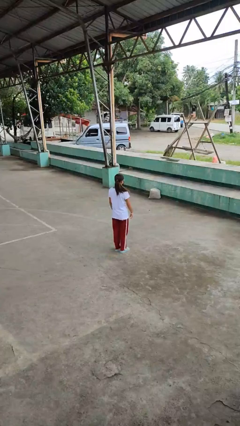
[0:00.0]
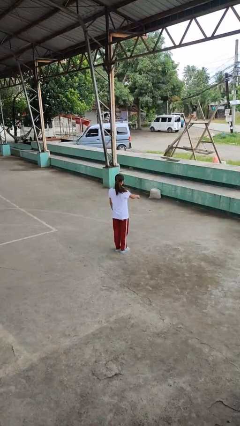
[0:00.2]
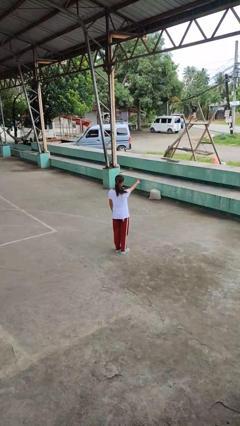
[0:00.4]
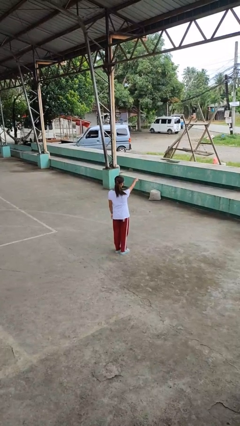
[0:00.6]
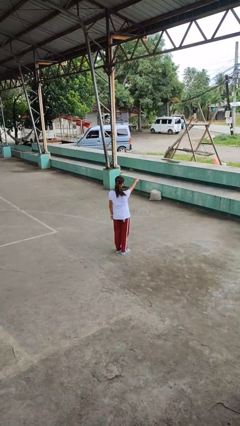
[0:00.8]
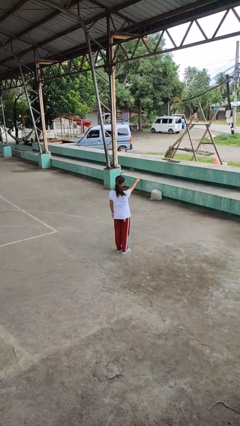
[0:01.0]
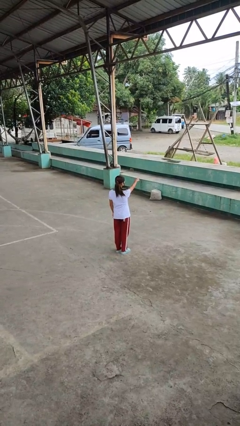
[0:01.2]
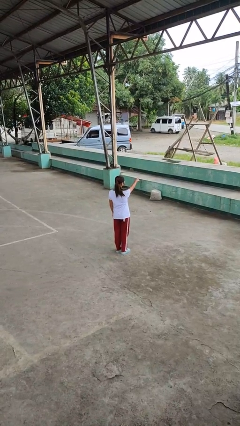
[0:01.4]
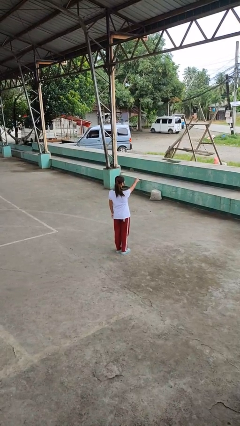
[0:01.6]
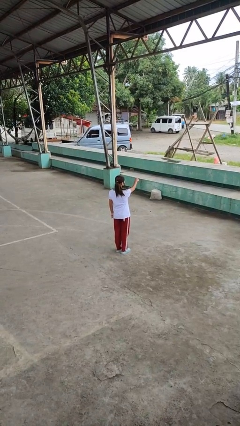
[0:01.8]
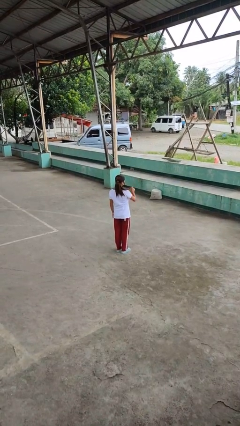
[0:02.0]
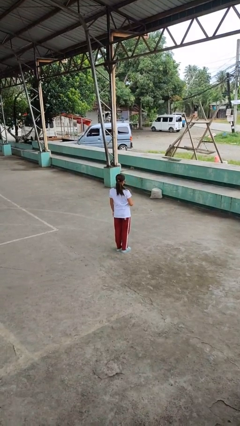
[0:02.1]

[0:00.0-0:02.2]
person points at person

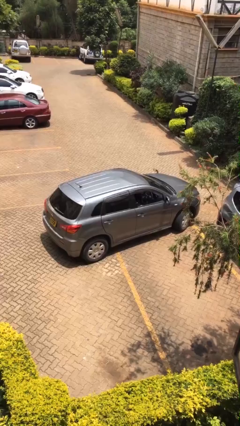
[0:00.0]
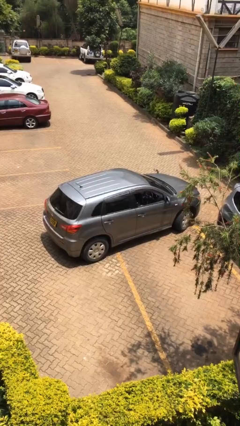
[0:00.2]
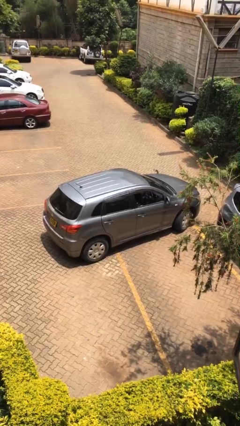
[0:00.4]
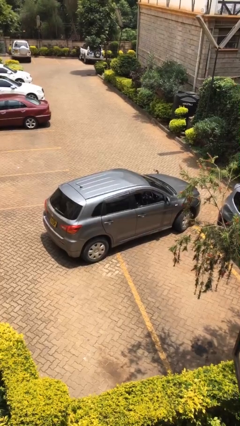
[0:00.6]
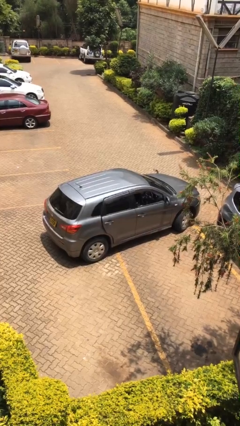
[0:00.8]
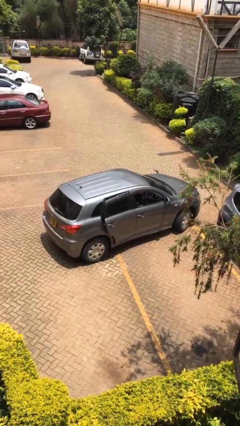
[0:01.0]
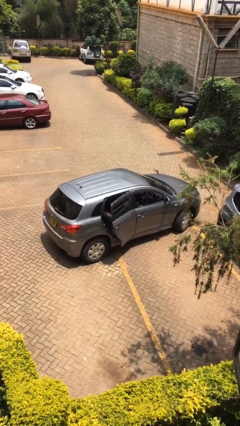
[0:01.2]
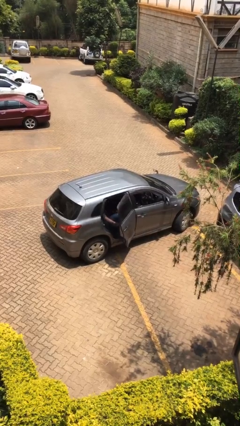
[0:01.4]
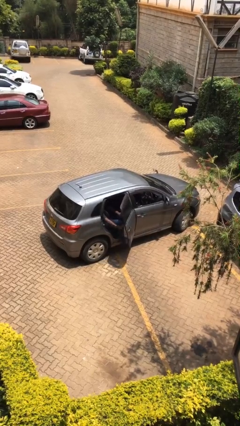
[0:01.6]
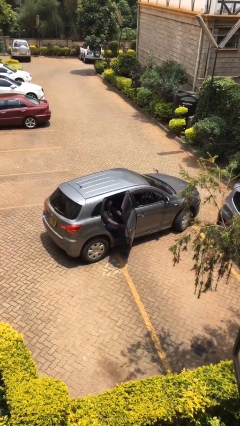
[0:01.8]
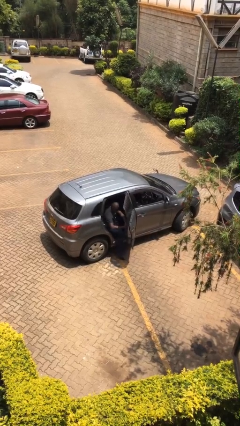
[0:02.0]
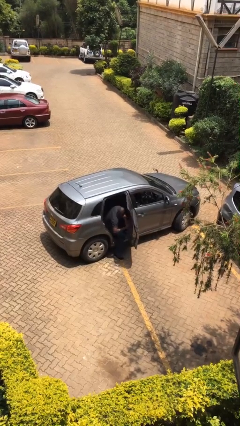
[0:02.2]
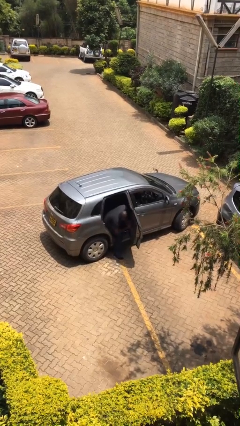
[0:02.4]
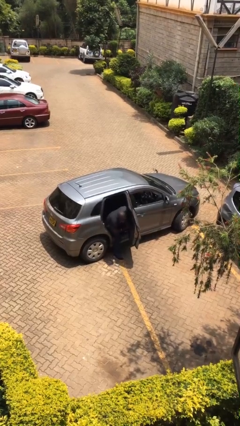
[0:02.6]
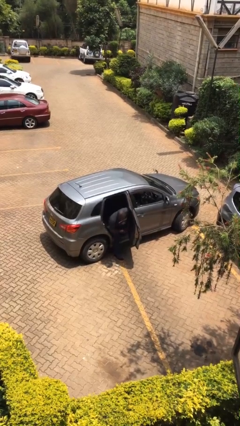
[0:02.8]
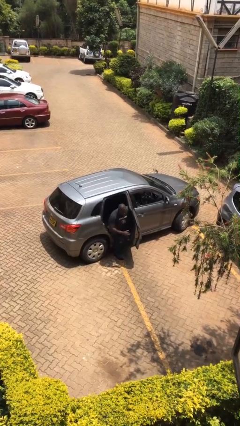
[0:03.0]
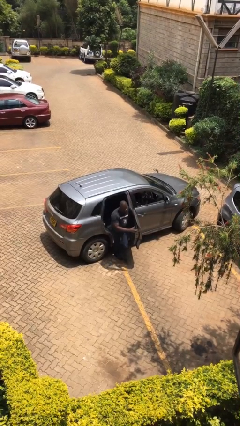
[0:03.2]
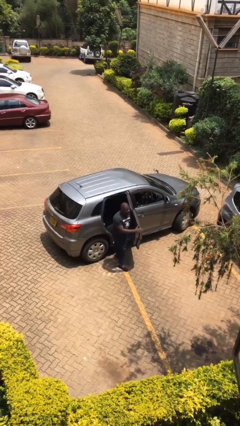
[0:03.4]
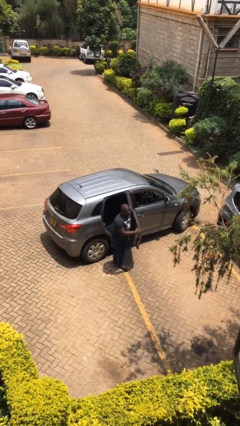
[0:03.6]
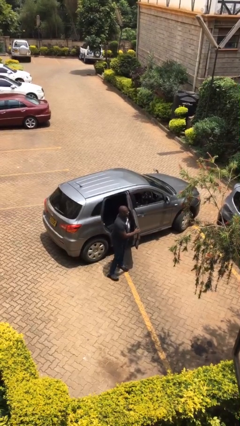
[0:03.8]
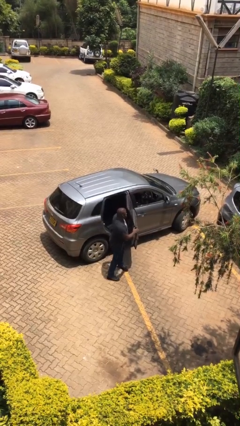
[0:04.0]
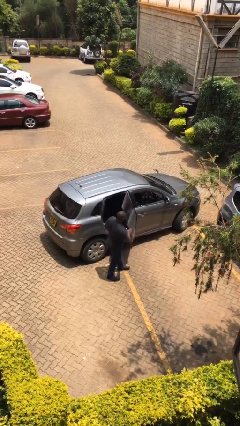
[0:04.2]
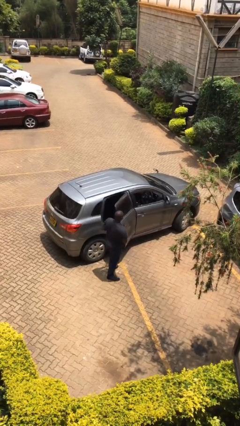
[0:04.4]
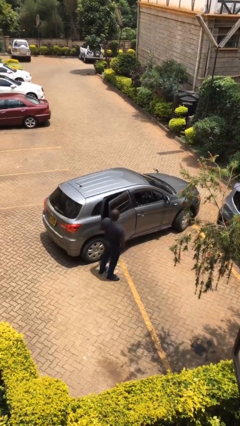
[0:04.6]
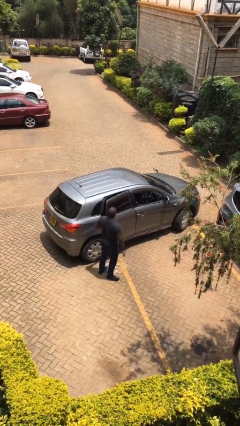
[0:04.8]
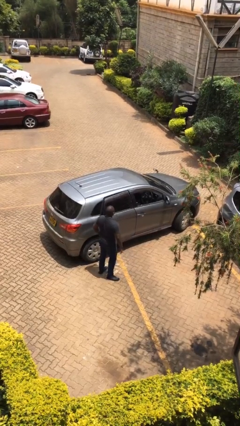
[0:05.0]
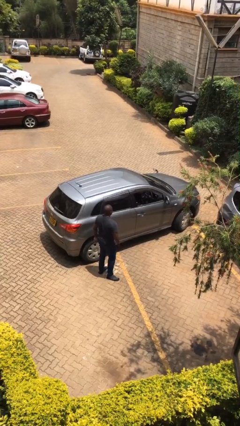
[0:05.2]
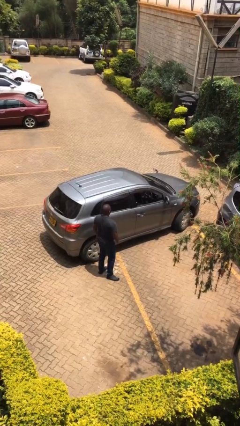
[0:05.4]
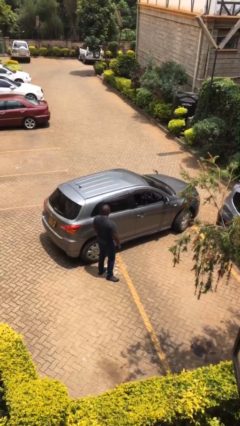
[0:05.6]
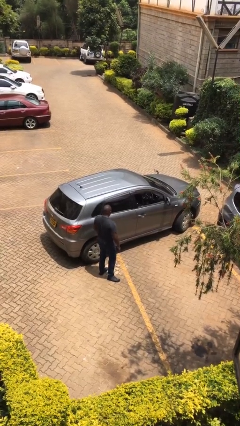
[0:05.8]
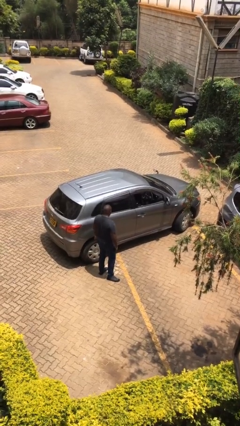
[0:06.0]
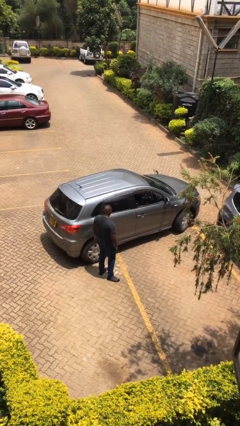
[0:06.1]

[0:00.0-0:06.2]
car drops off person

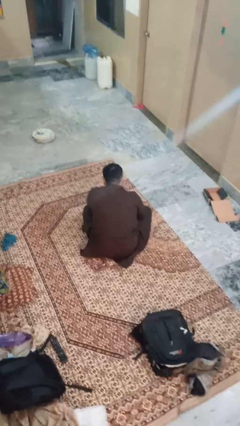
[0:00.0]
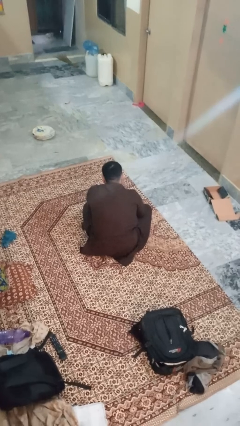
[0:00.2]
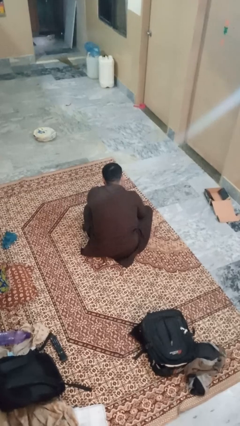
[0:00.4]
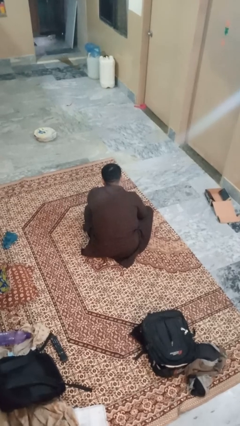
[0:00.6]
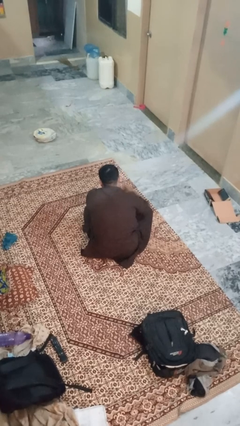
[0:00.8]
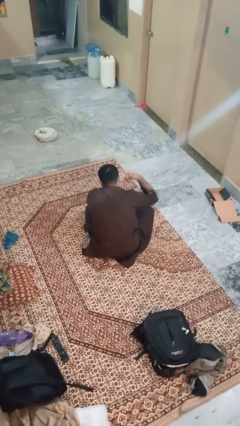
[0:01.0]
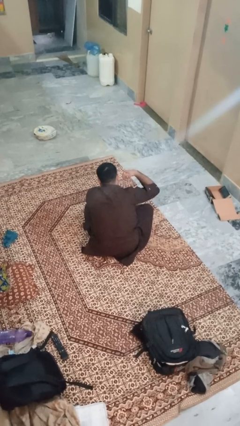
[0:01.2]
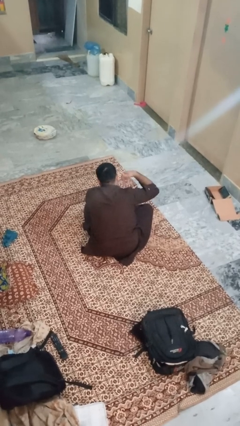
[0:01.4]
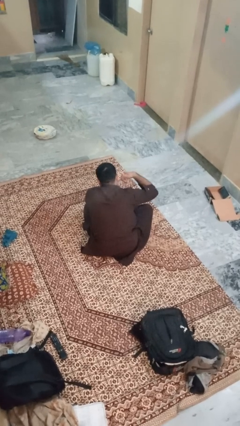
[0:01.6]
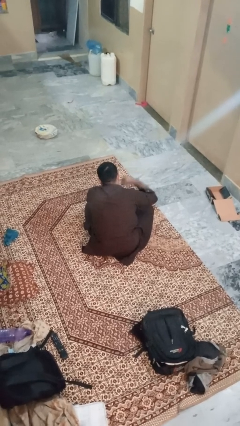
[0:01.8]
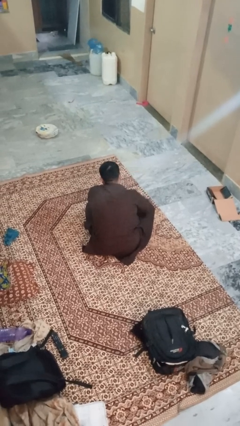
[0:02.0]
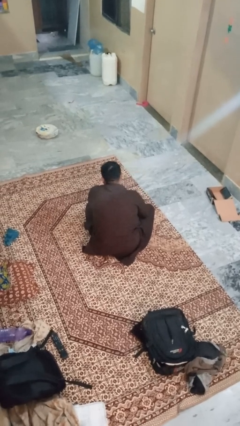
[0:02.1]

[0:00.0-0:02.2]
person gestures call me

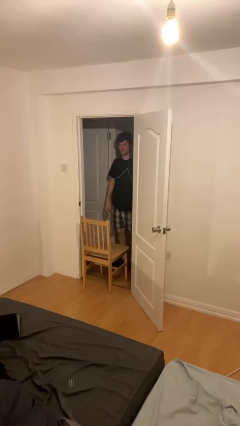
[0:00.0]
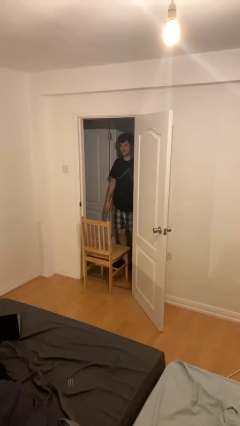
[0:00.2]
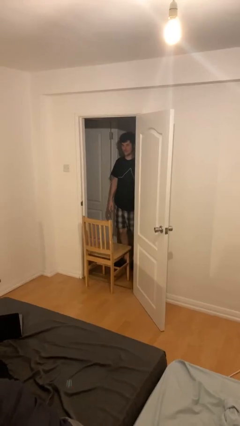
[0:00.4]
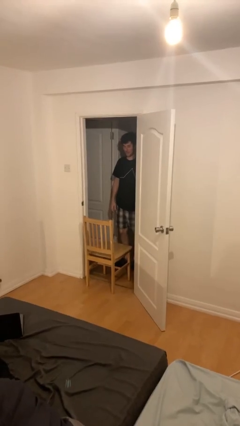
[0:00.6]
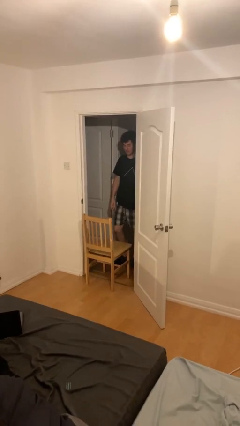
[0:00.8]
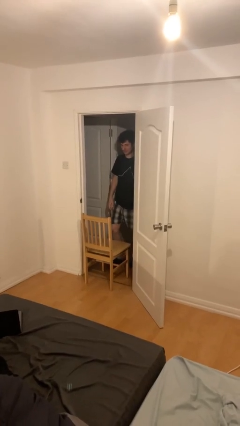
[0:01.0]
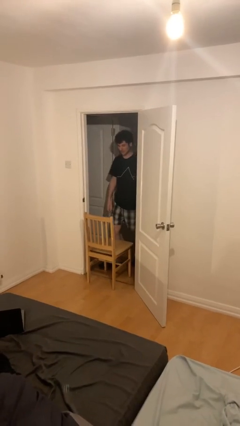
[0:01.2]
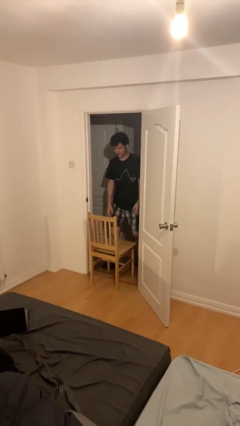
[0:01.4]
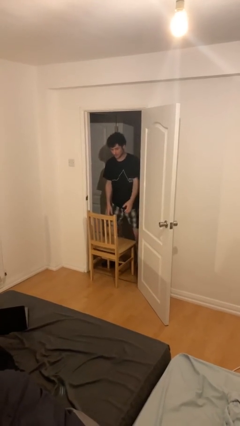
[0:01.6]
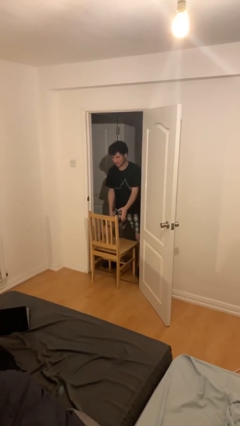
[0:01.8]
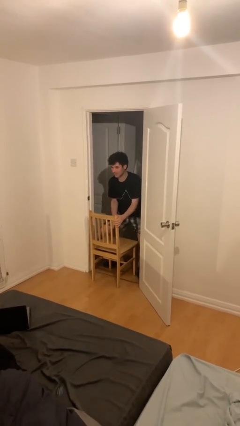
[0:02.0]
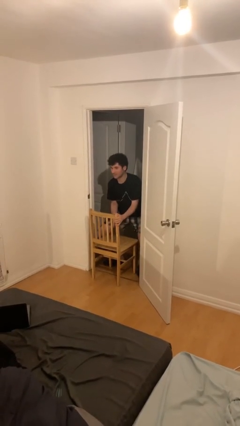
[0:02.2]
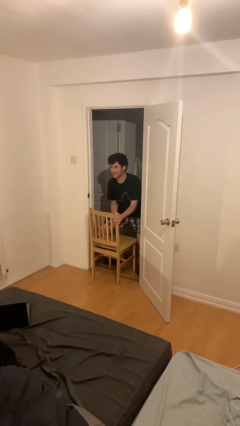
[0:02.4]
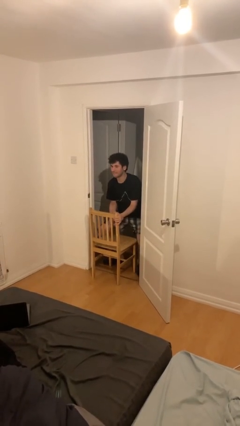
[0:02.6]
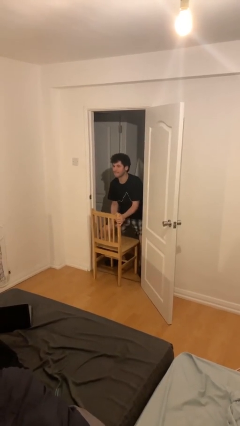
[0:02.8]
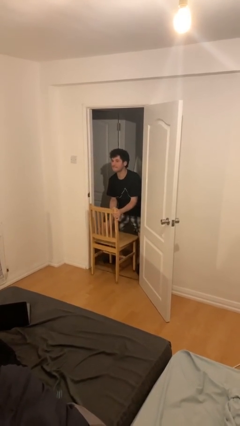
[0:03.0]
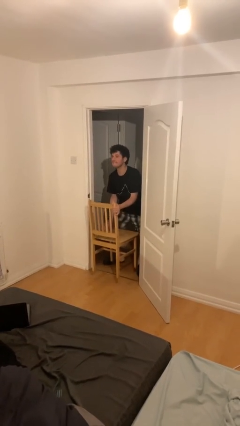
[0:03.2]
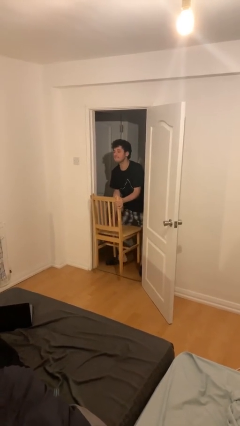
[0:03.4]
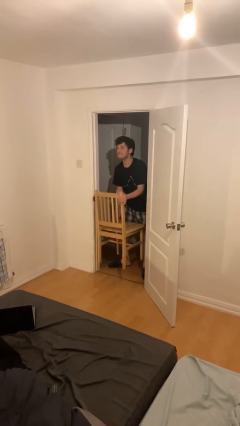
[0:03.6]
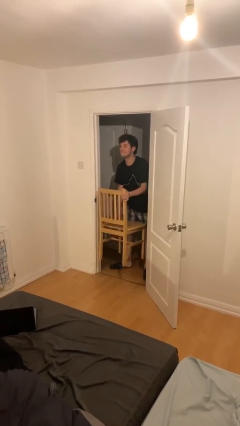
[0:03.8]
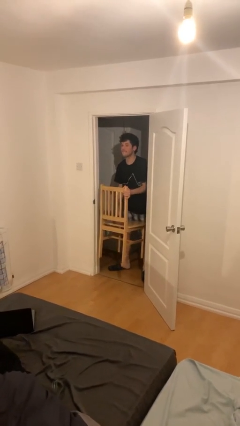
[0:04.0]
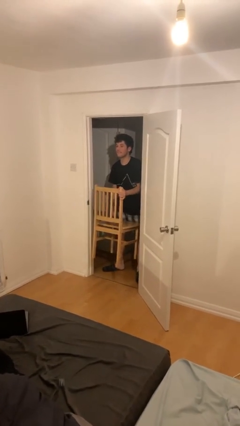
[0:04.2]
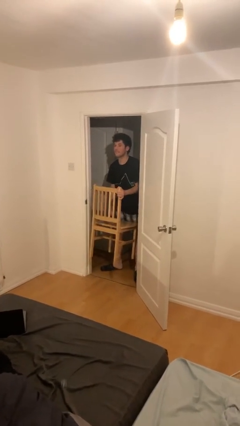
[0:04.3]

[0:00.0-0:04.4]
person picks up object from floor

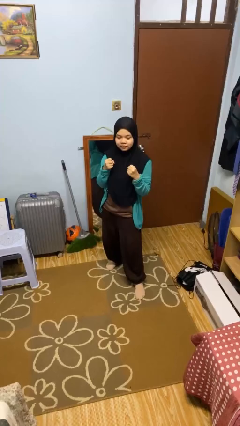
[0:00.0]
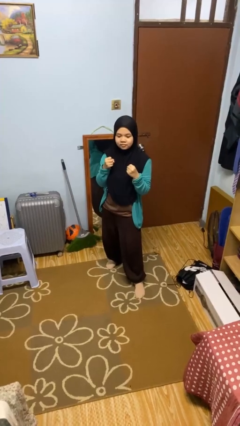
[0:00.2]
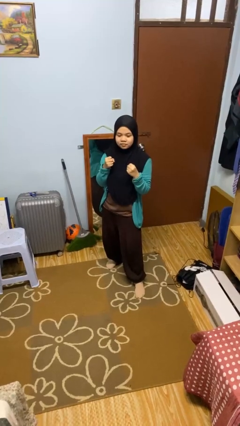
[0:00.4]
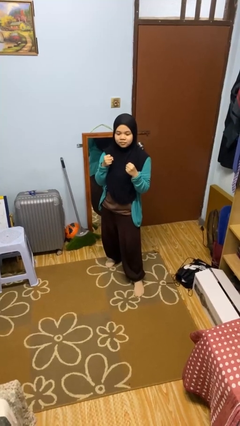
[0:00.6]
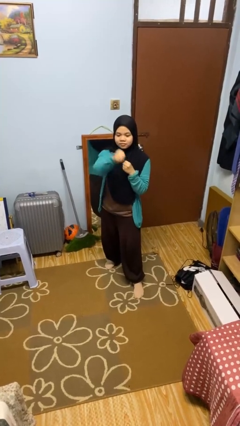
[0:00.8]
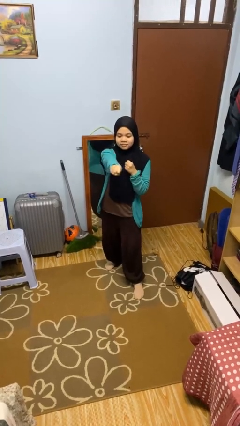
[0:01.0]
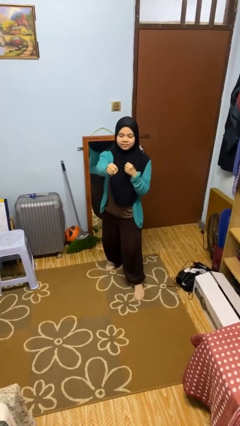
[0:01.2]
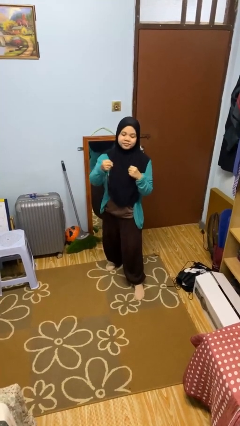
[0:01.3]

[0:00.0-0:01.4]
person punches

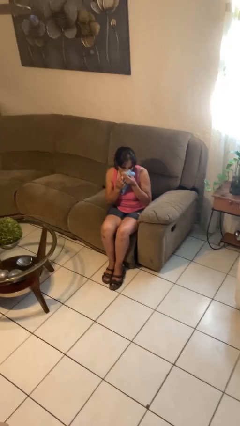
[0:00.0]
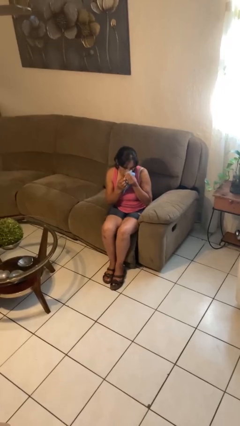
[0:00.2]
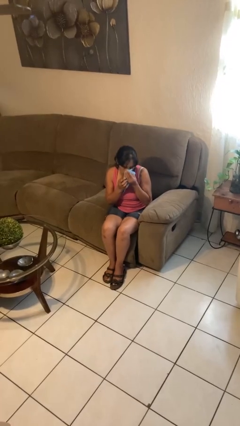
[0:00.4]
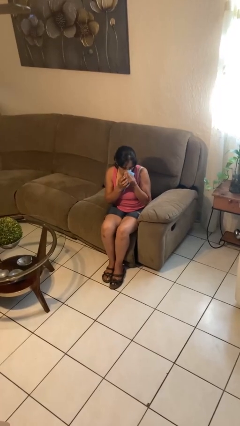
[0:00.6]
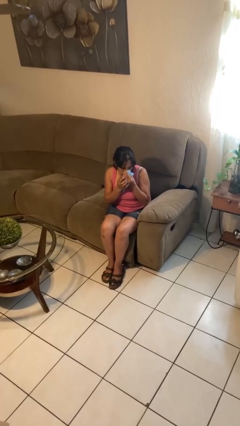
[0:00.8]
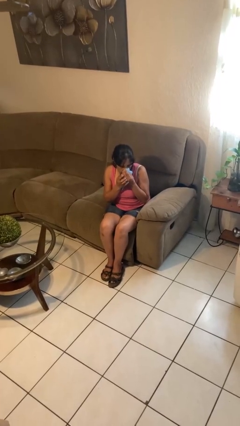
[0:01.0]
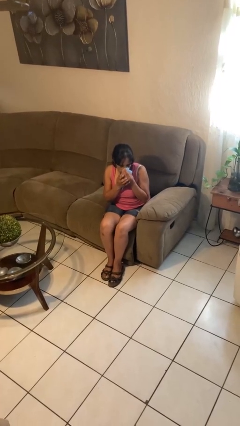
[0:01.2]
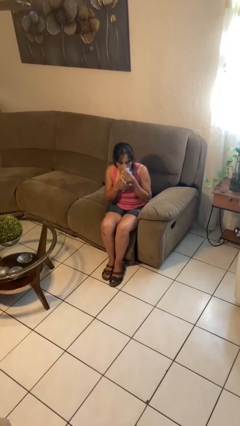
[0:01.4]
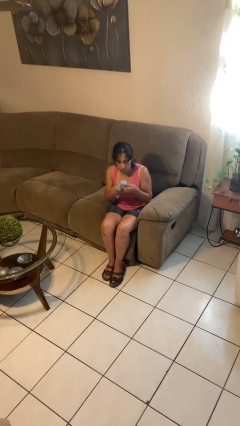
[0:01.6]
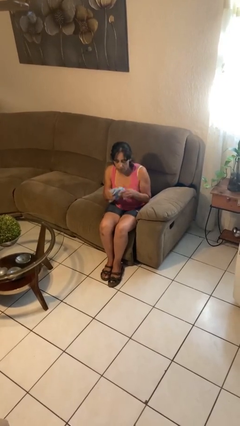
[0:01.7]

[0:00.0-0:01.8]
person blows nose
